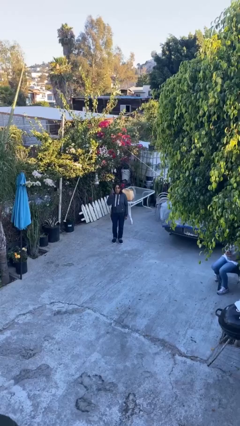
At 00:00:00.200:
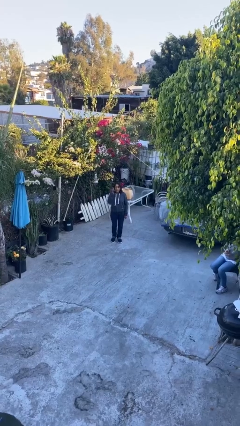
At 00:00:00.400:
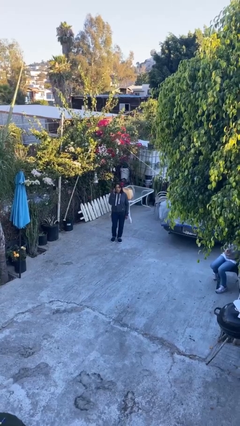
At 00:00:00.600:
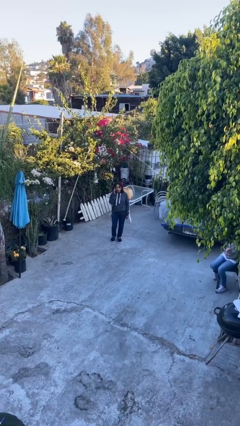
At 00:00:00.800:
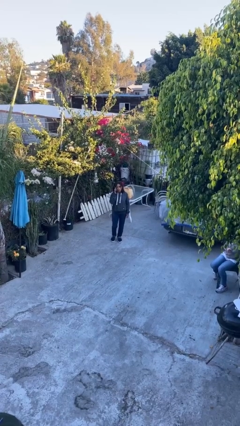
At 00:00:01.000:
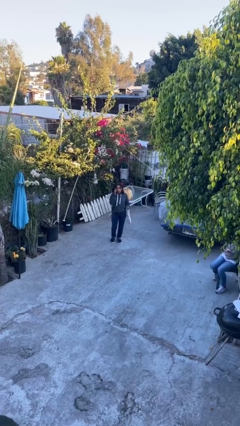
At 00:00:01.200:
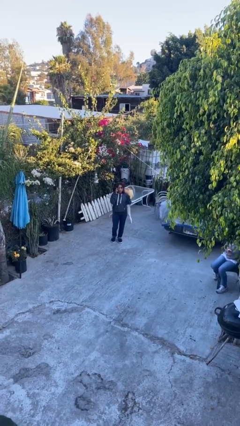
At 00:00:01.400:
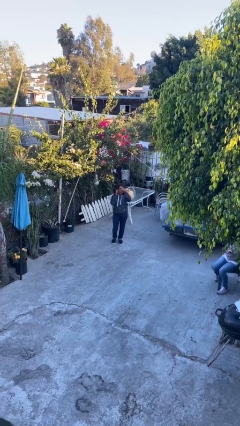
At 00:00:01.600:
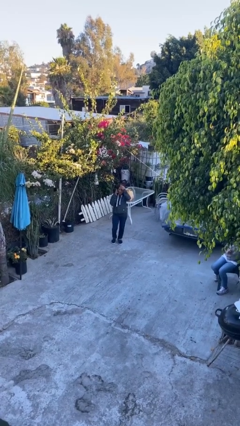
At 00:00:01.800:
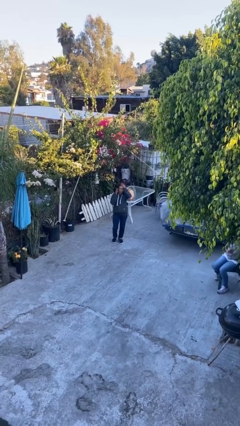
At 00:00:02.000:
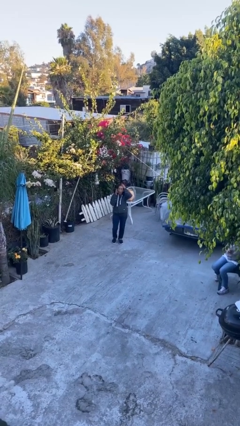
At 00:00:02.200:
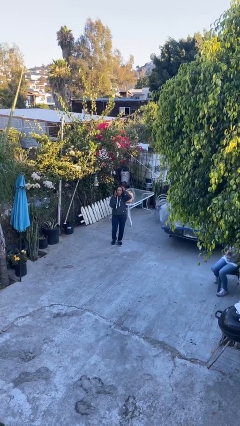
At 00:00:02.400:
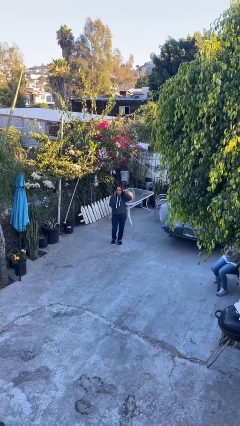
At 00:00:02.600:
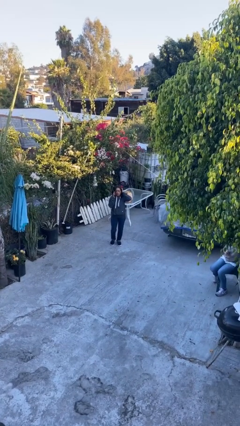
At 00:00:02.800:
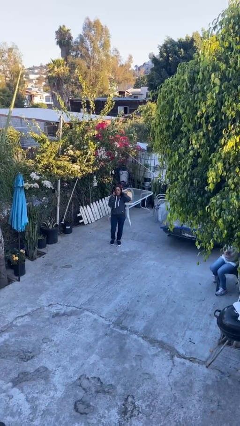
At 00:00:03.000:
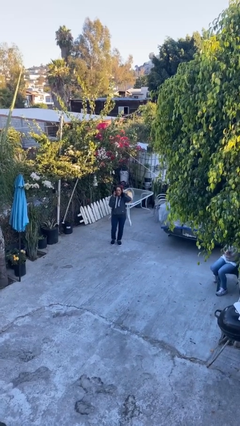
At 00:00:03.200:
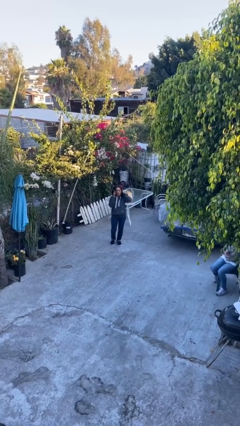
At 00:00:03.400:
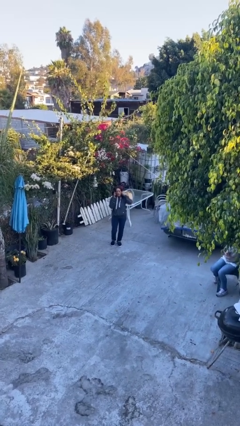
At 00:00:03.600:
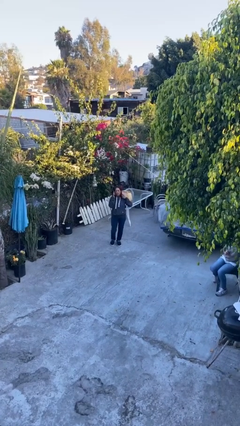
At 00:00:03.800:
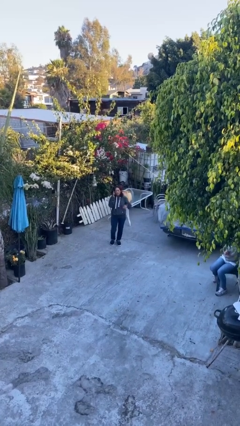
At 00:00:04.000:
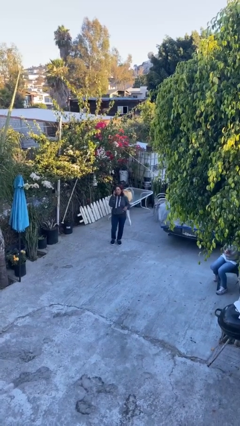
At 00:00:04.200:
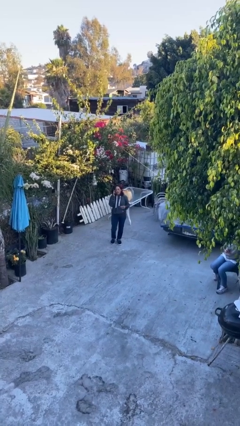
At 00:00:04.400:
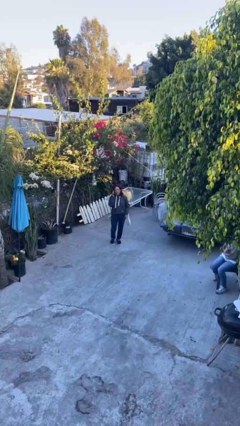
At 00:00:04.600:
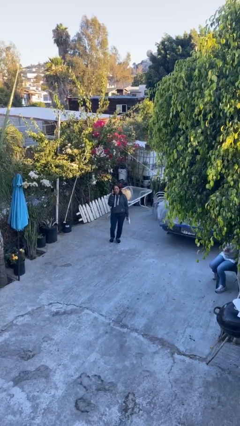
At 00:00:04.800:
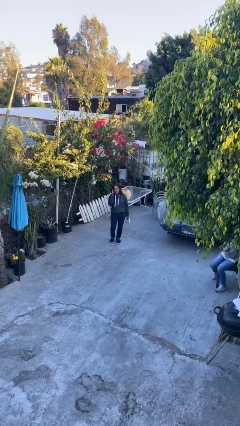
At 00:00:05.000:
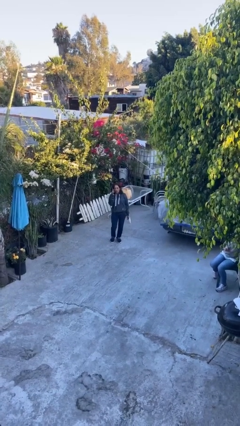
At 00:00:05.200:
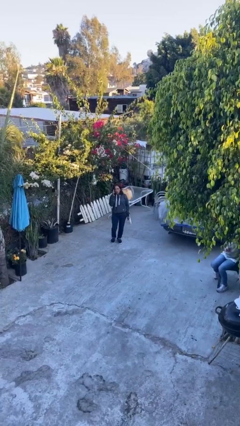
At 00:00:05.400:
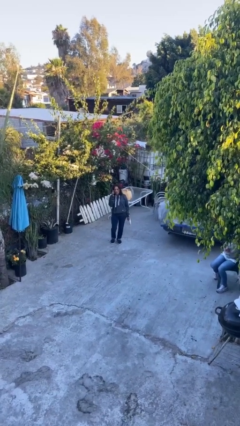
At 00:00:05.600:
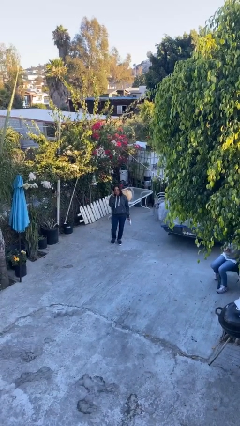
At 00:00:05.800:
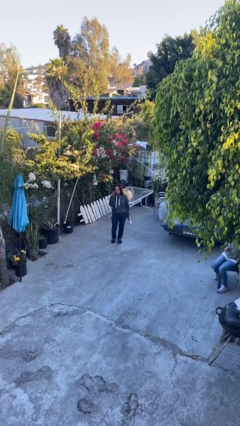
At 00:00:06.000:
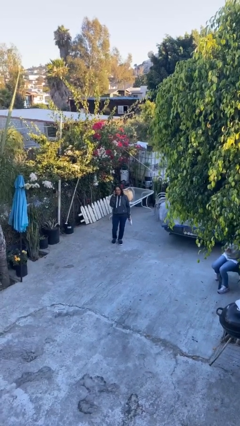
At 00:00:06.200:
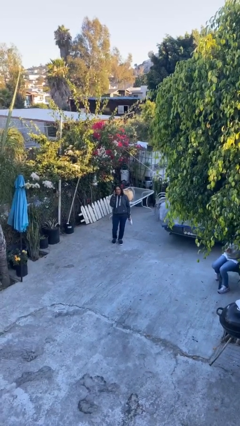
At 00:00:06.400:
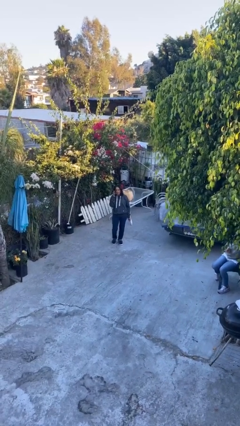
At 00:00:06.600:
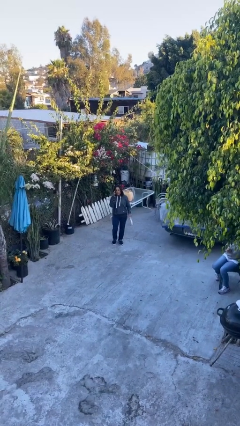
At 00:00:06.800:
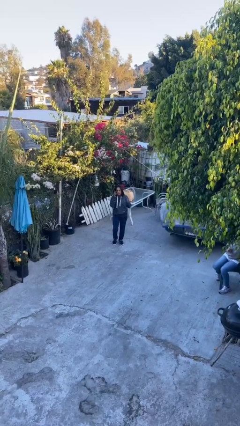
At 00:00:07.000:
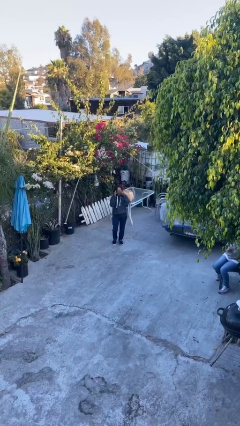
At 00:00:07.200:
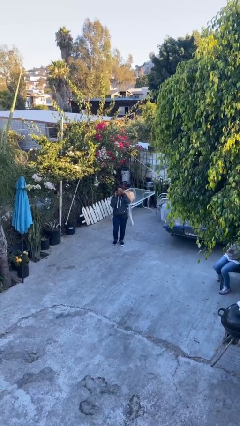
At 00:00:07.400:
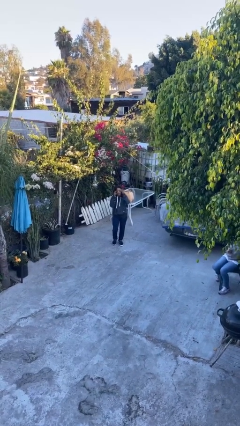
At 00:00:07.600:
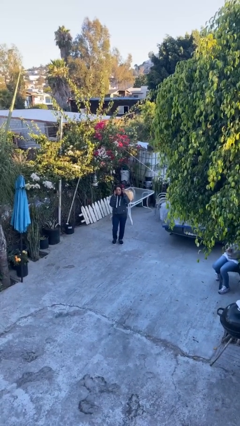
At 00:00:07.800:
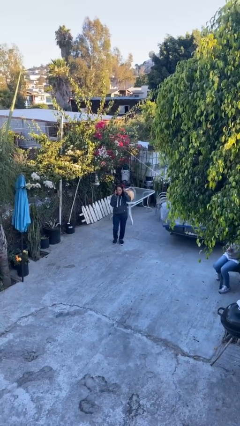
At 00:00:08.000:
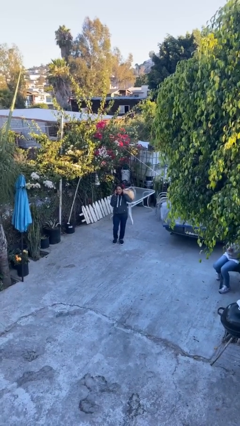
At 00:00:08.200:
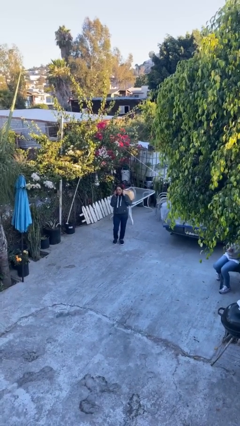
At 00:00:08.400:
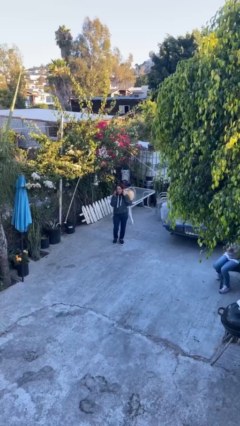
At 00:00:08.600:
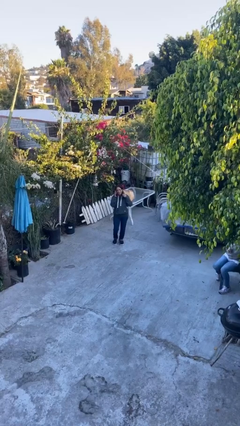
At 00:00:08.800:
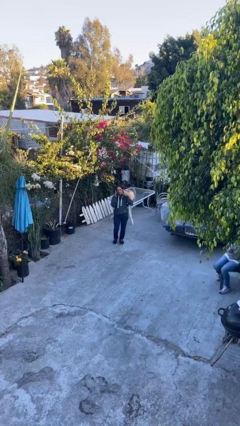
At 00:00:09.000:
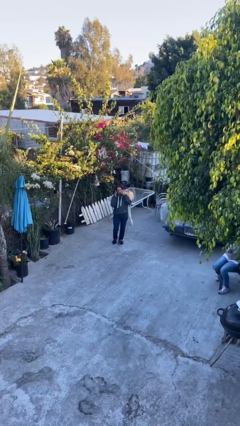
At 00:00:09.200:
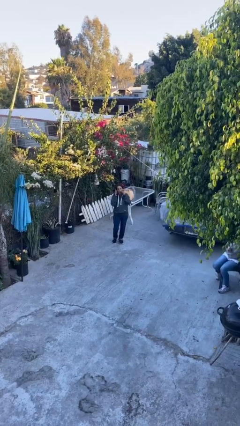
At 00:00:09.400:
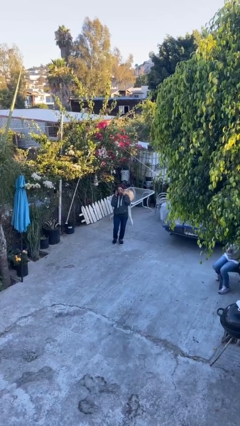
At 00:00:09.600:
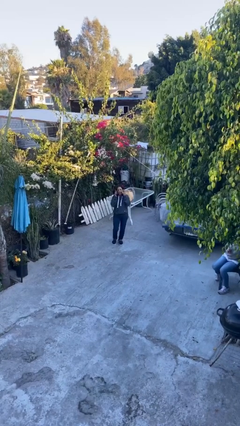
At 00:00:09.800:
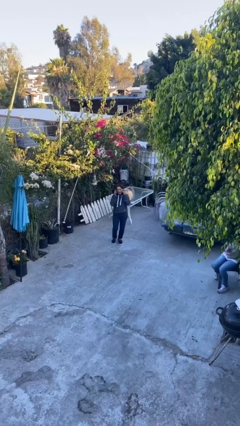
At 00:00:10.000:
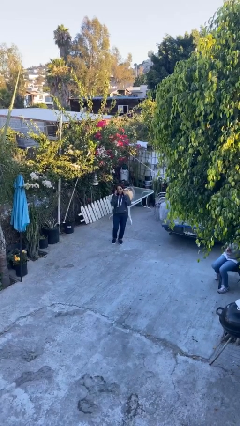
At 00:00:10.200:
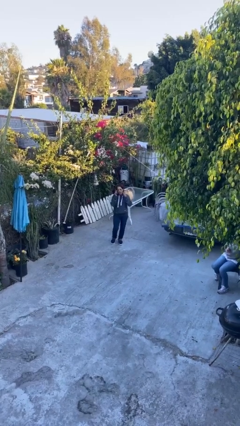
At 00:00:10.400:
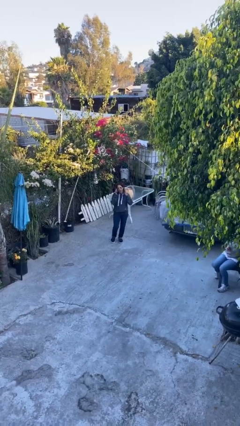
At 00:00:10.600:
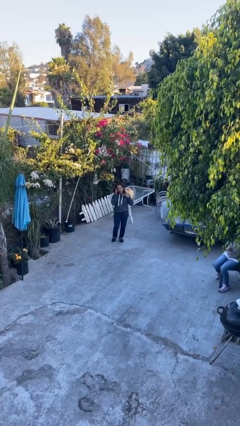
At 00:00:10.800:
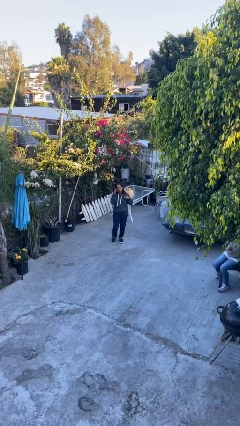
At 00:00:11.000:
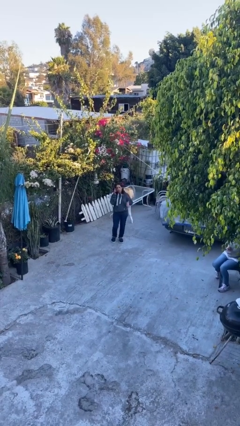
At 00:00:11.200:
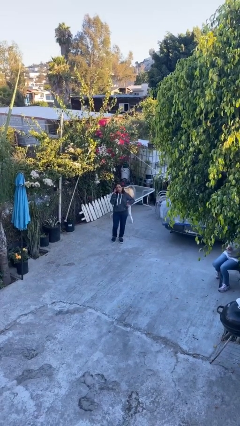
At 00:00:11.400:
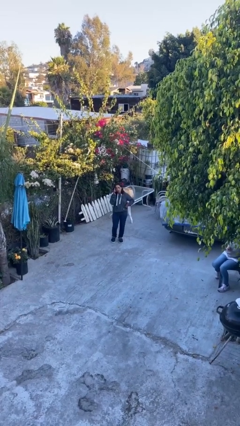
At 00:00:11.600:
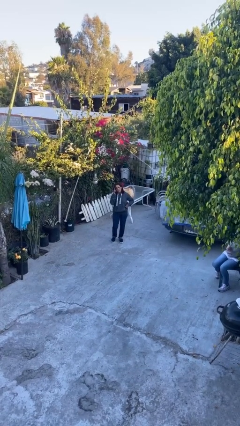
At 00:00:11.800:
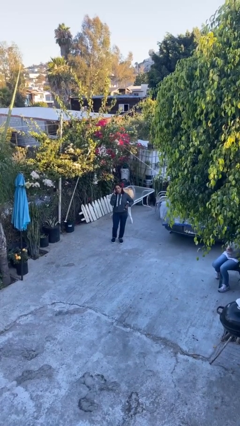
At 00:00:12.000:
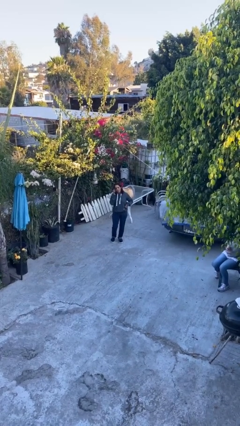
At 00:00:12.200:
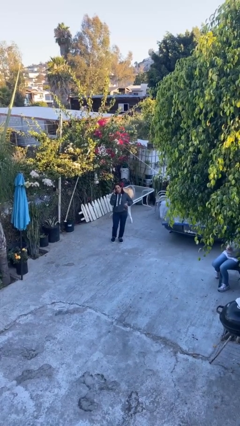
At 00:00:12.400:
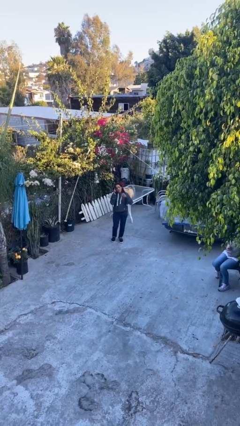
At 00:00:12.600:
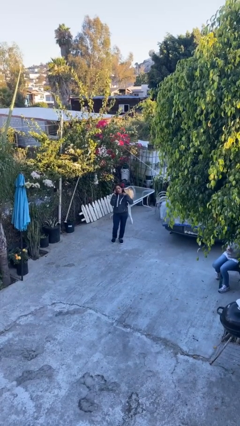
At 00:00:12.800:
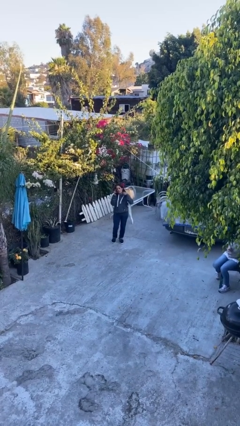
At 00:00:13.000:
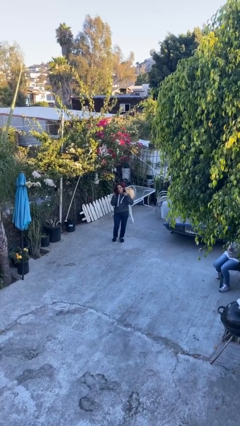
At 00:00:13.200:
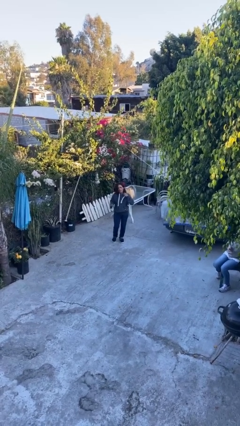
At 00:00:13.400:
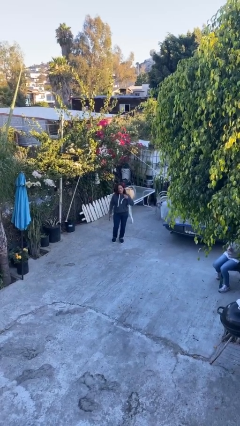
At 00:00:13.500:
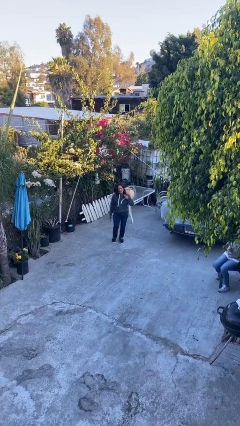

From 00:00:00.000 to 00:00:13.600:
person talks on phone

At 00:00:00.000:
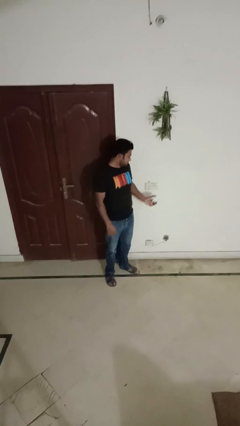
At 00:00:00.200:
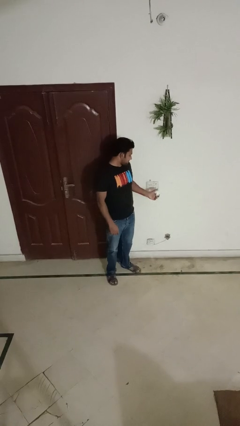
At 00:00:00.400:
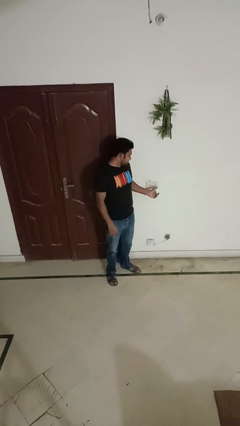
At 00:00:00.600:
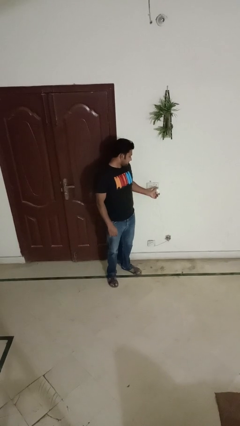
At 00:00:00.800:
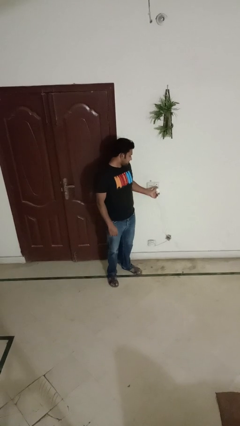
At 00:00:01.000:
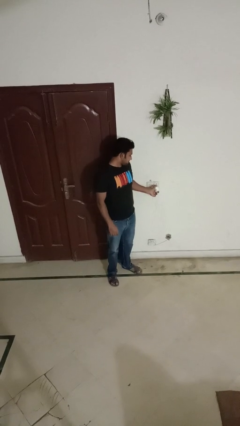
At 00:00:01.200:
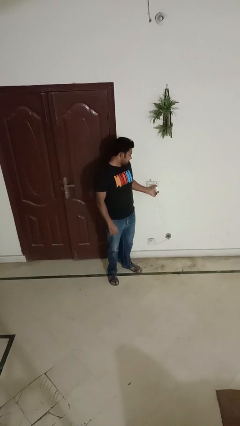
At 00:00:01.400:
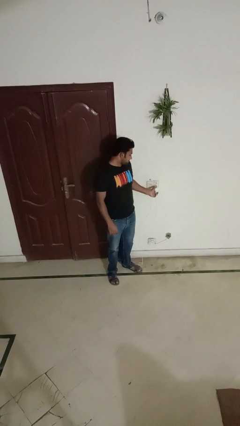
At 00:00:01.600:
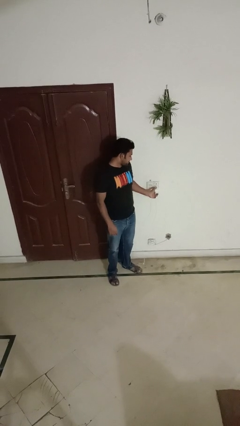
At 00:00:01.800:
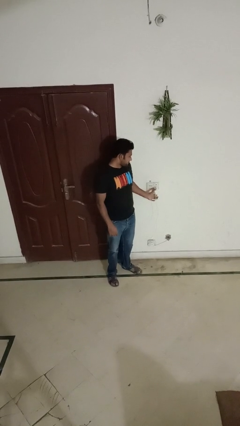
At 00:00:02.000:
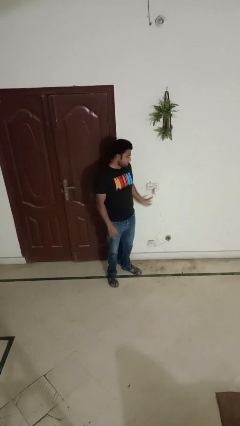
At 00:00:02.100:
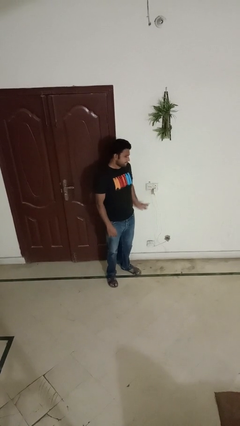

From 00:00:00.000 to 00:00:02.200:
person plugs into electrical socket

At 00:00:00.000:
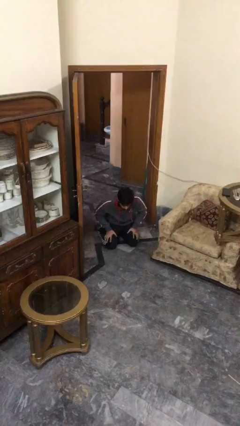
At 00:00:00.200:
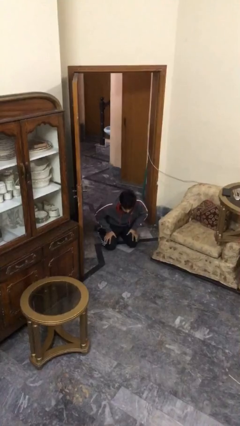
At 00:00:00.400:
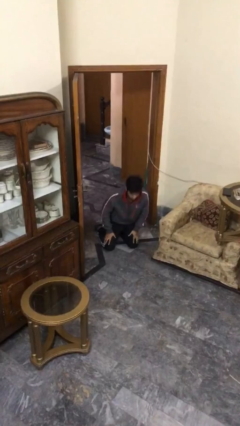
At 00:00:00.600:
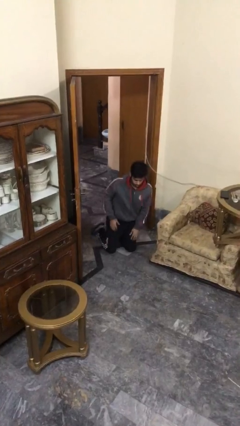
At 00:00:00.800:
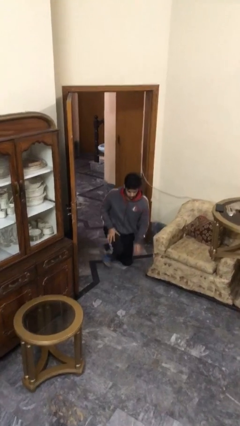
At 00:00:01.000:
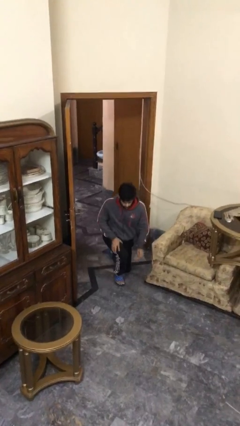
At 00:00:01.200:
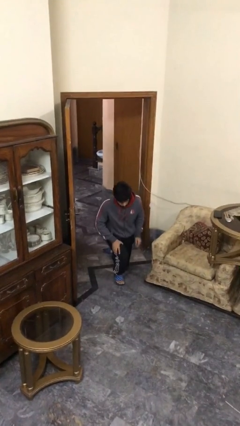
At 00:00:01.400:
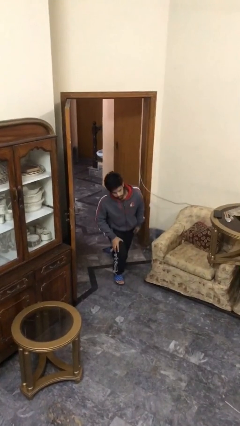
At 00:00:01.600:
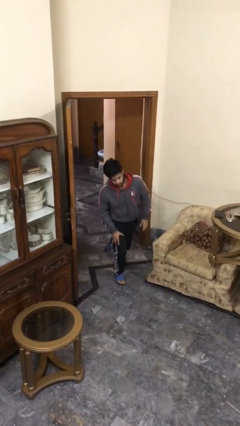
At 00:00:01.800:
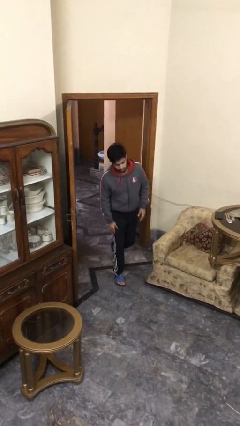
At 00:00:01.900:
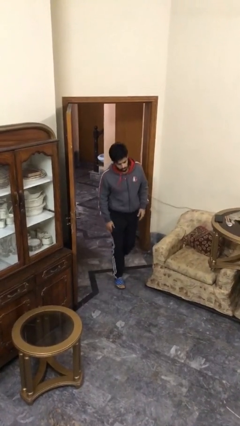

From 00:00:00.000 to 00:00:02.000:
person stands up

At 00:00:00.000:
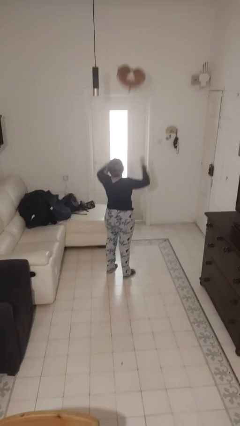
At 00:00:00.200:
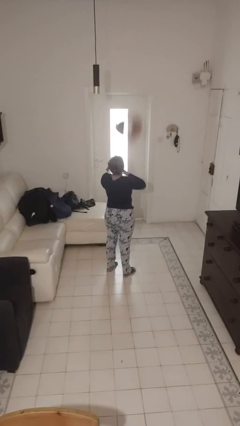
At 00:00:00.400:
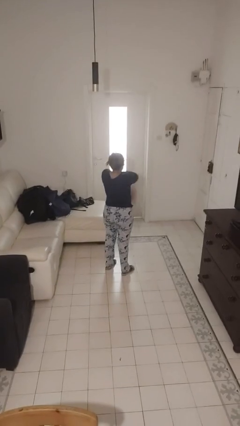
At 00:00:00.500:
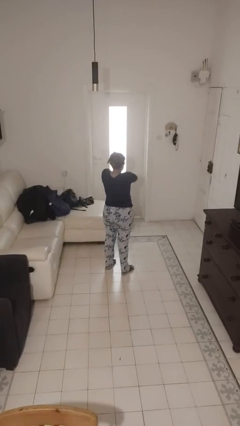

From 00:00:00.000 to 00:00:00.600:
person catches dropped object
